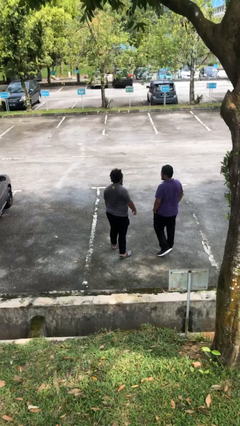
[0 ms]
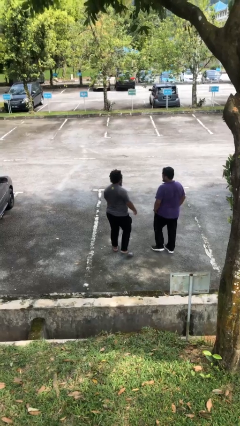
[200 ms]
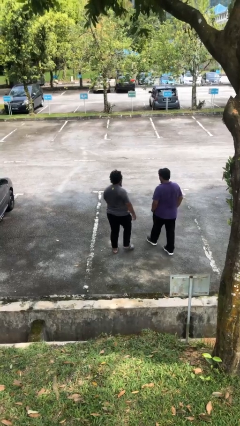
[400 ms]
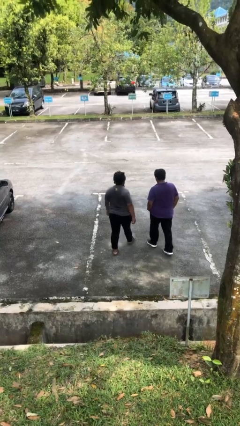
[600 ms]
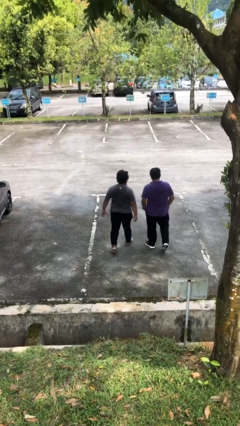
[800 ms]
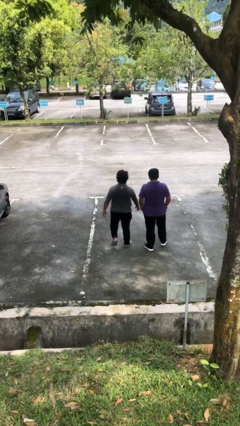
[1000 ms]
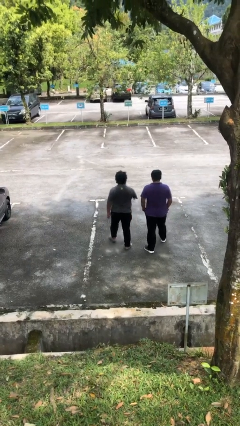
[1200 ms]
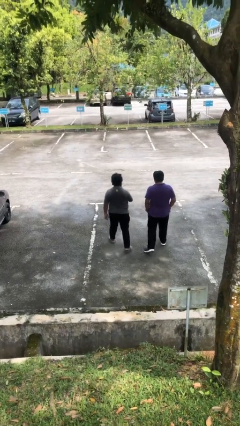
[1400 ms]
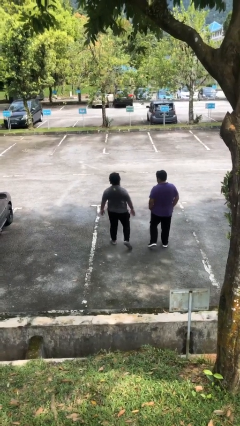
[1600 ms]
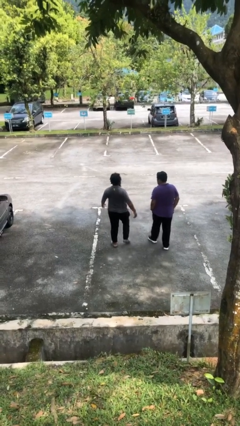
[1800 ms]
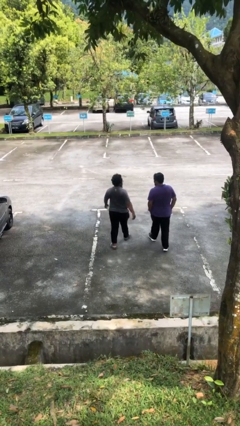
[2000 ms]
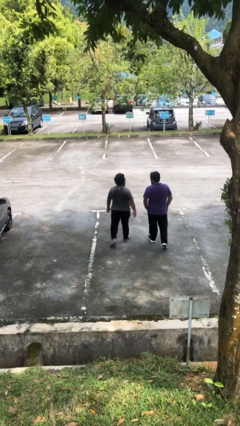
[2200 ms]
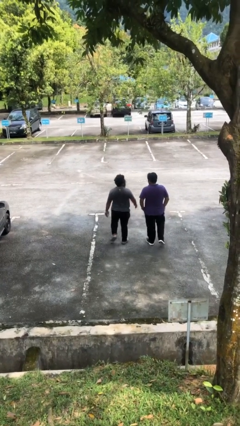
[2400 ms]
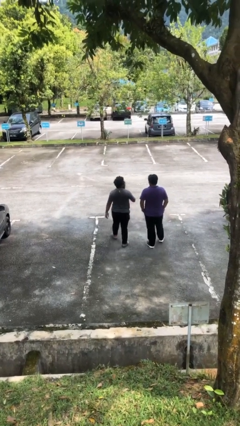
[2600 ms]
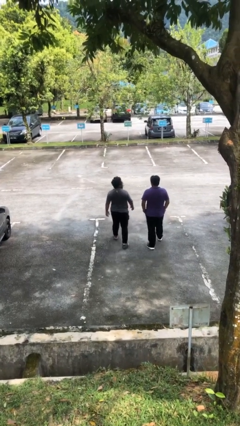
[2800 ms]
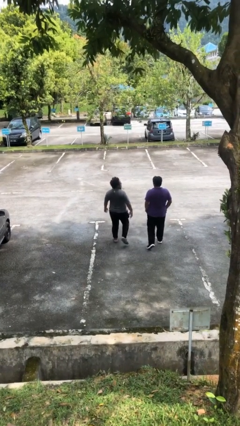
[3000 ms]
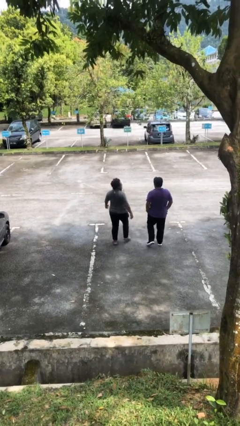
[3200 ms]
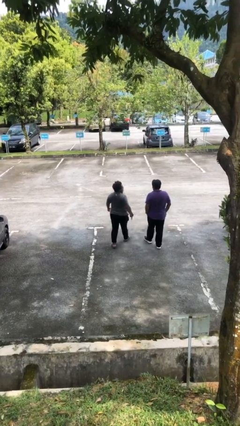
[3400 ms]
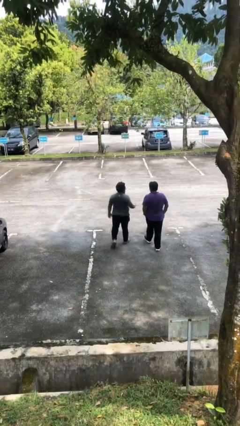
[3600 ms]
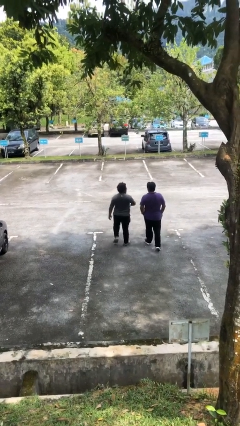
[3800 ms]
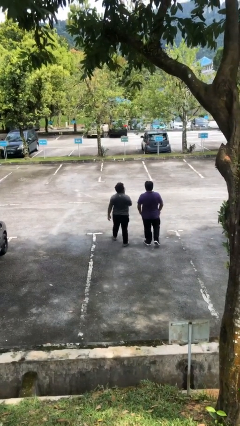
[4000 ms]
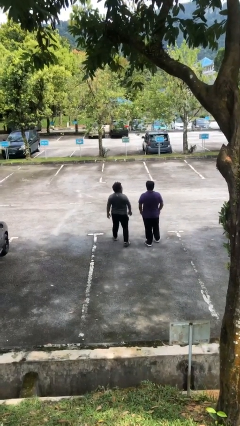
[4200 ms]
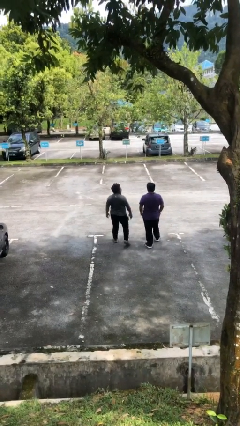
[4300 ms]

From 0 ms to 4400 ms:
person talks to person

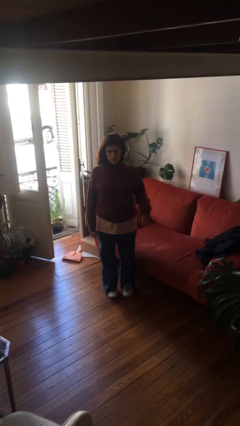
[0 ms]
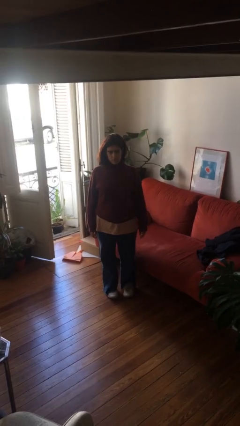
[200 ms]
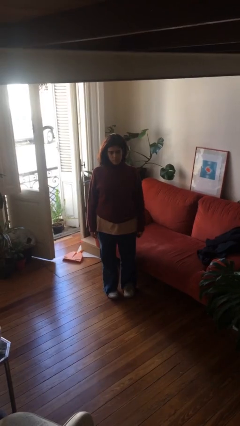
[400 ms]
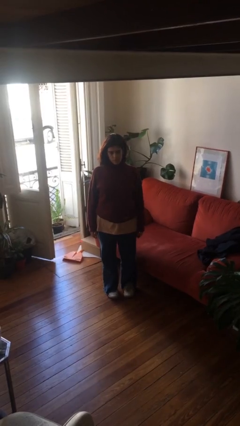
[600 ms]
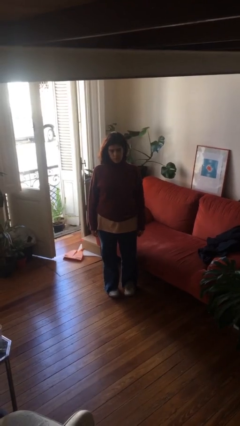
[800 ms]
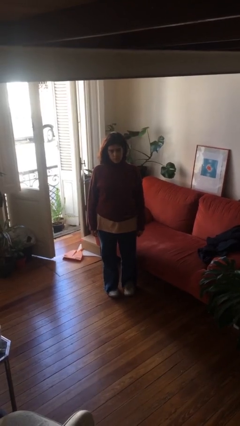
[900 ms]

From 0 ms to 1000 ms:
person gestures lower hand

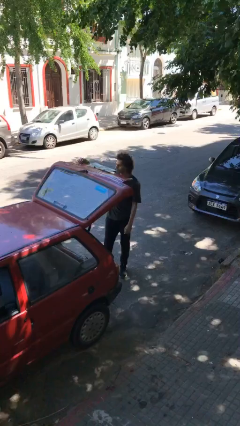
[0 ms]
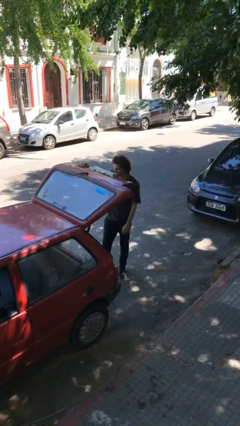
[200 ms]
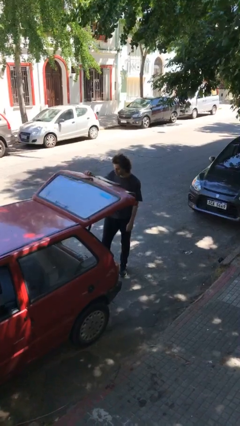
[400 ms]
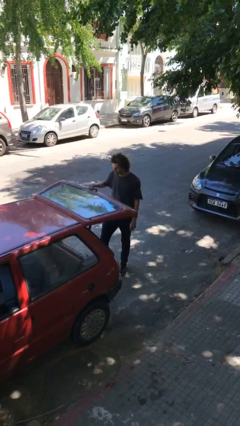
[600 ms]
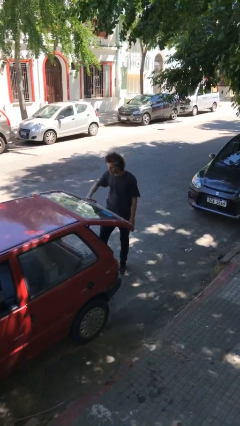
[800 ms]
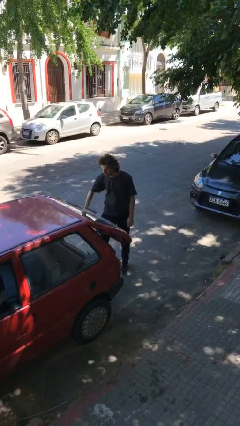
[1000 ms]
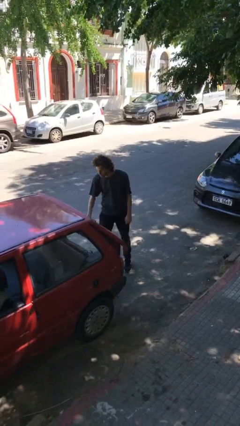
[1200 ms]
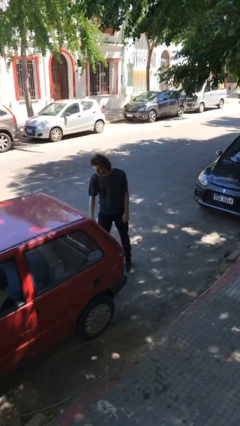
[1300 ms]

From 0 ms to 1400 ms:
person closes car trunk

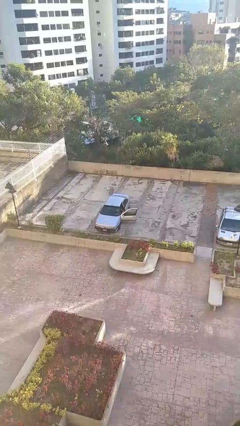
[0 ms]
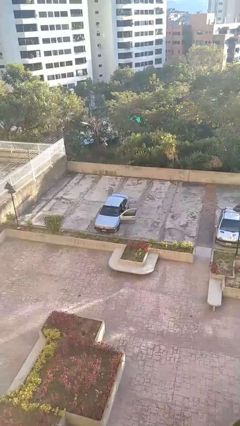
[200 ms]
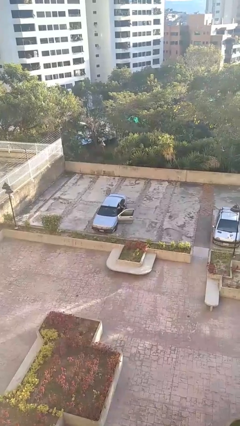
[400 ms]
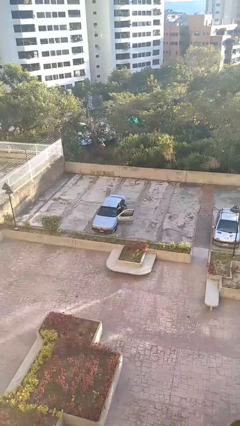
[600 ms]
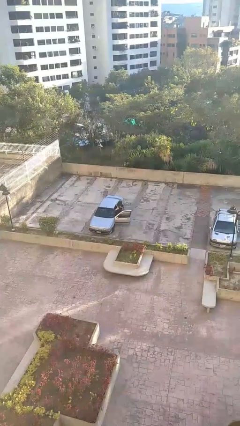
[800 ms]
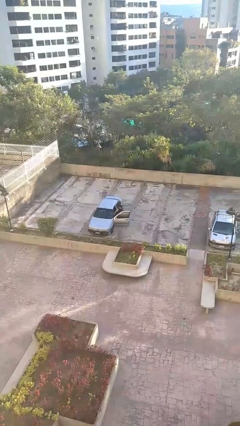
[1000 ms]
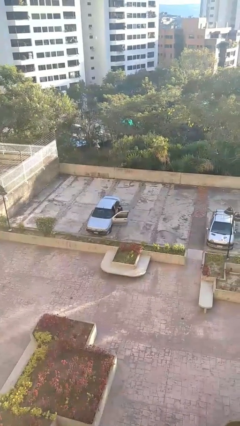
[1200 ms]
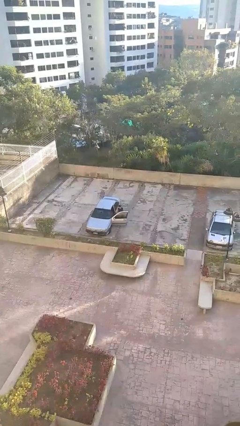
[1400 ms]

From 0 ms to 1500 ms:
person exits car

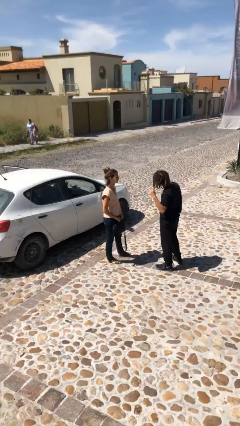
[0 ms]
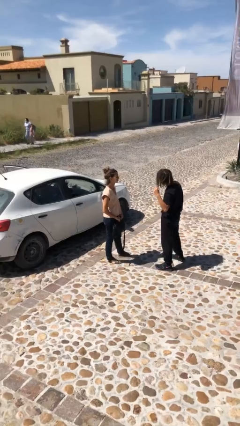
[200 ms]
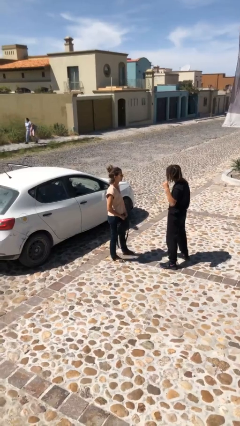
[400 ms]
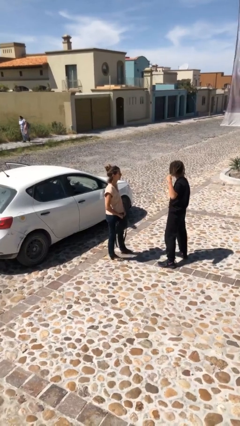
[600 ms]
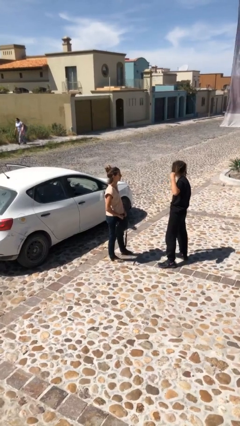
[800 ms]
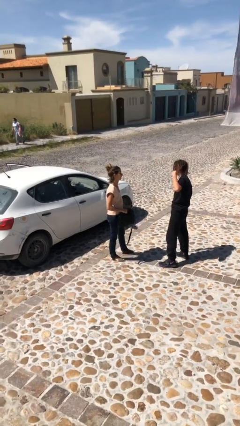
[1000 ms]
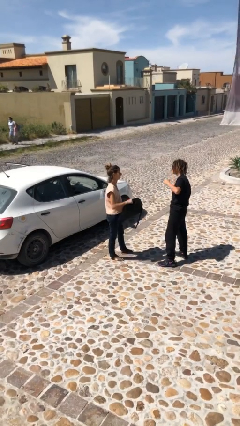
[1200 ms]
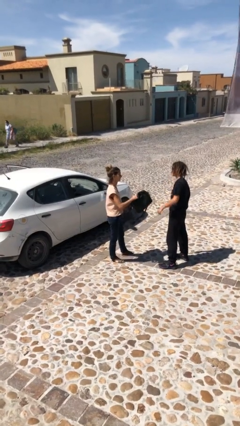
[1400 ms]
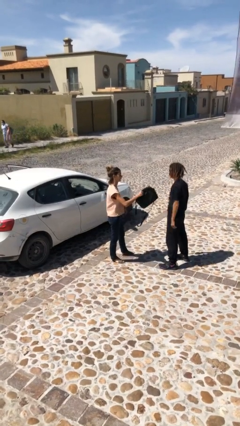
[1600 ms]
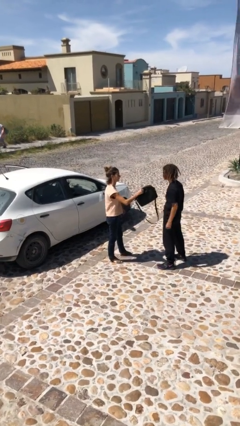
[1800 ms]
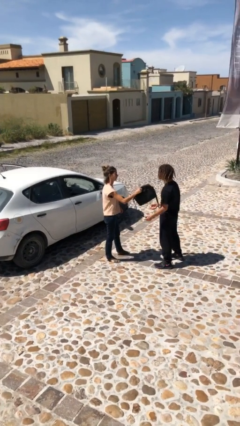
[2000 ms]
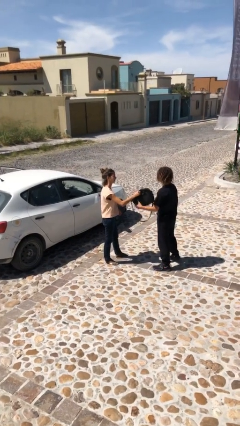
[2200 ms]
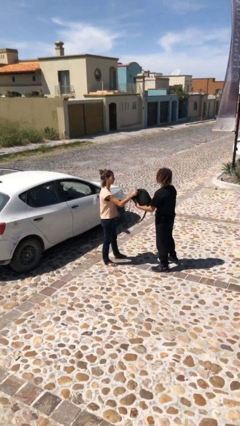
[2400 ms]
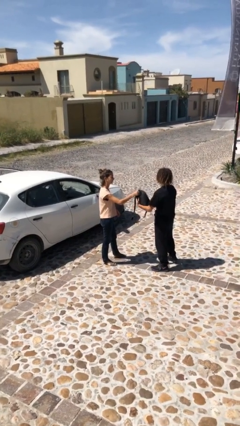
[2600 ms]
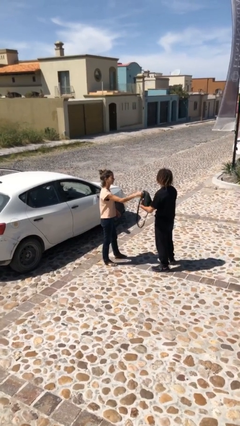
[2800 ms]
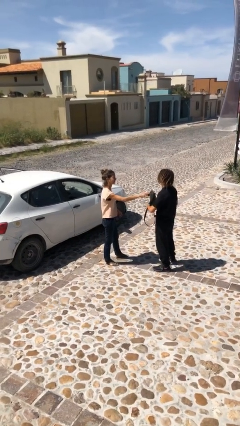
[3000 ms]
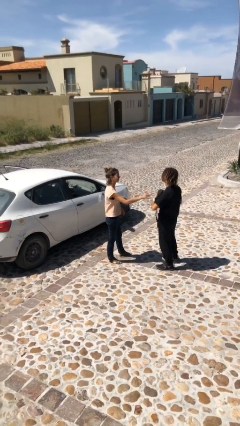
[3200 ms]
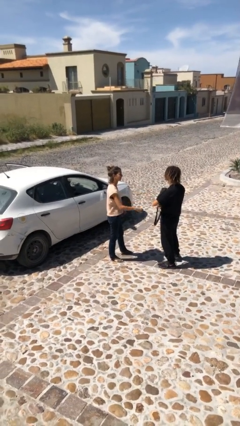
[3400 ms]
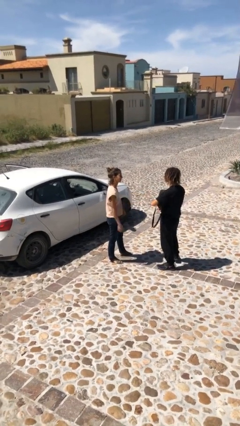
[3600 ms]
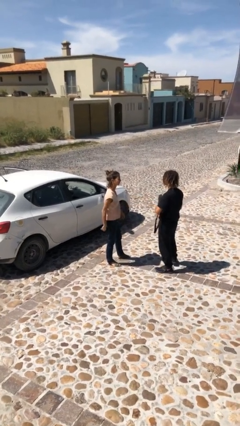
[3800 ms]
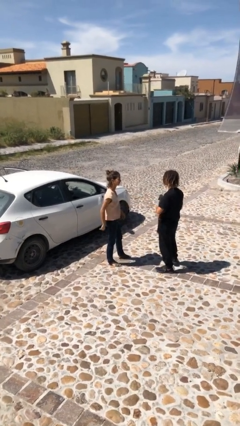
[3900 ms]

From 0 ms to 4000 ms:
person transfers object to person

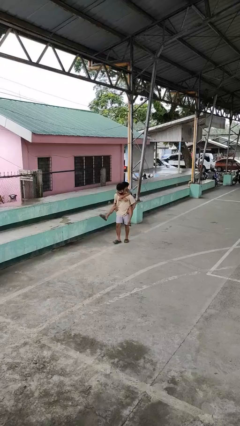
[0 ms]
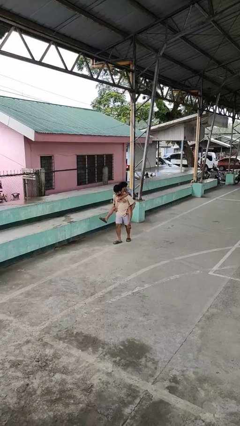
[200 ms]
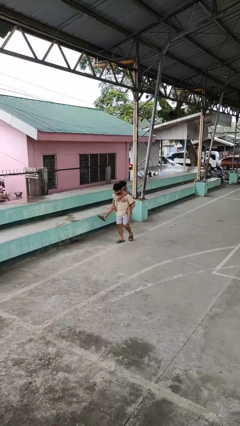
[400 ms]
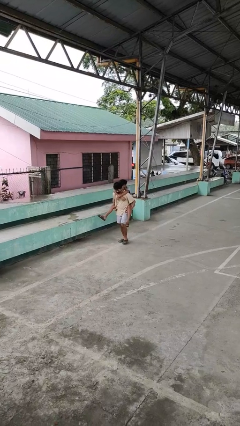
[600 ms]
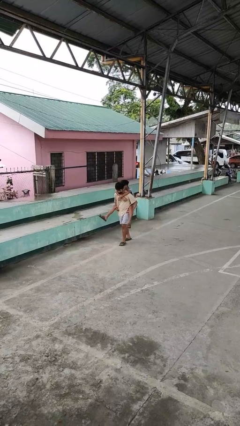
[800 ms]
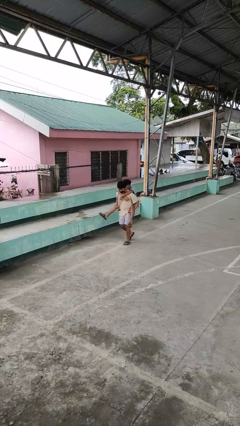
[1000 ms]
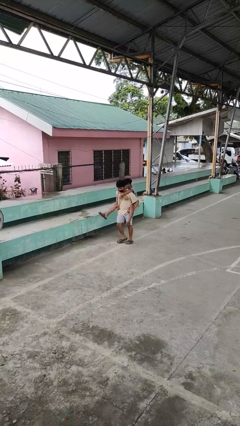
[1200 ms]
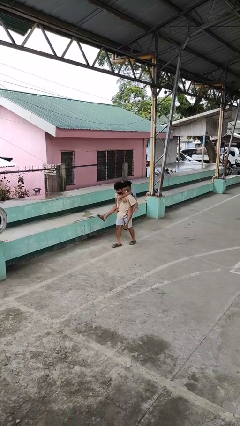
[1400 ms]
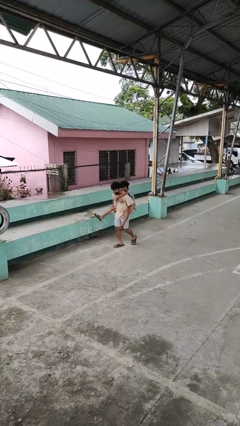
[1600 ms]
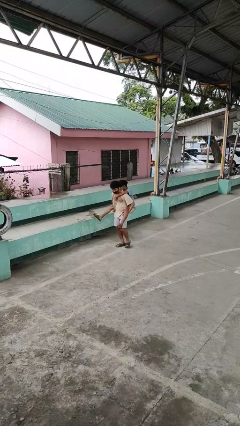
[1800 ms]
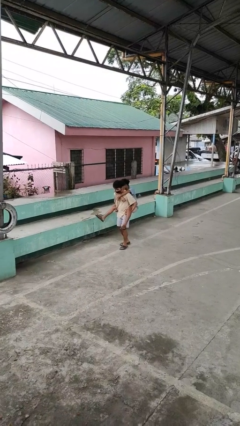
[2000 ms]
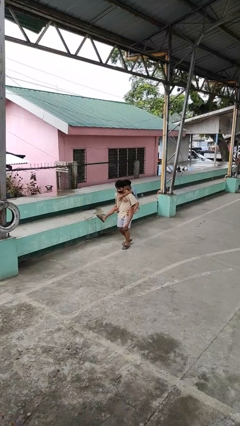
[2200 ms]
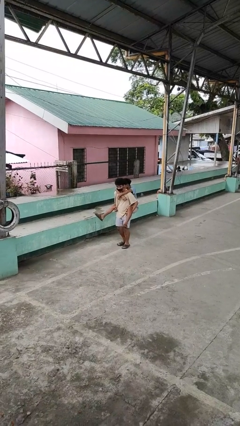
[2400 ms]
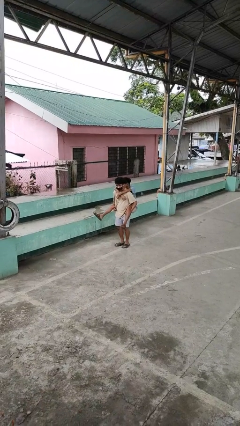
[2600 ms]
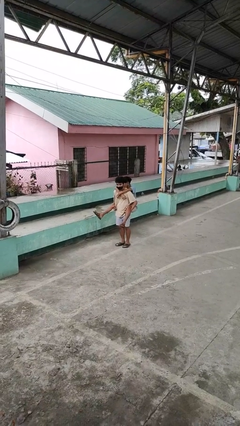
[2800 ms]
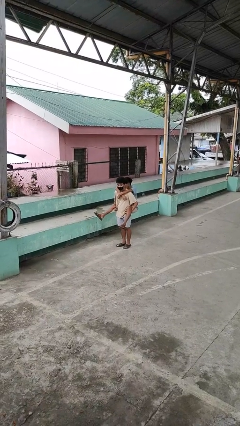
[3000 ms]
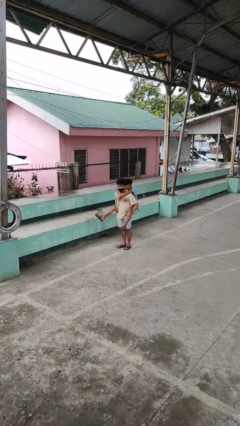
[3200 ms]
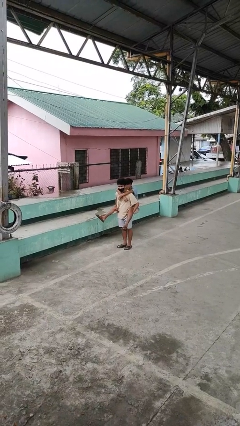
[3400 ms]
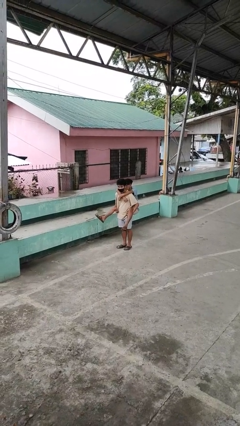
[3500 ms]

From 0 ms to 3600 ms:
person carries person on back

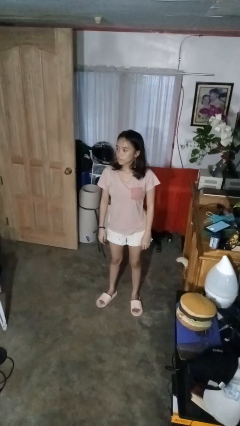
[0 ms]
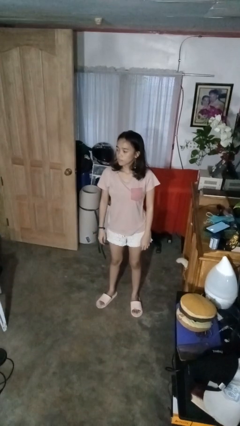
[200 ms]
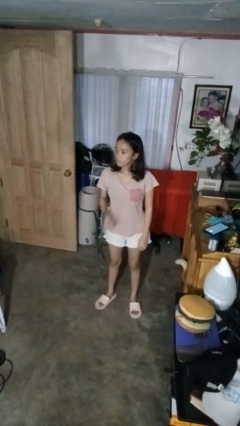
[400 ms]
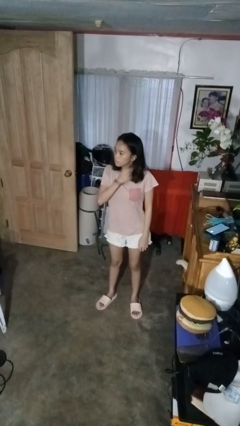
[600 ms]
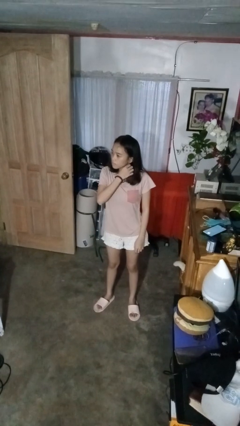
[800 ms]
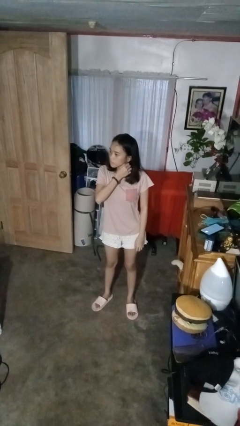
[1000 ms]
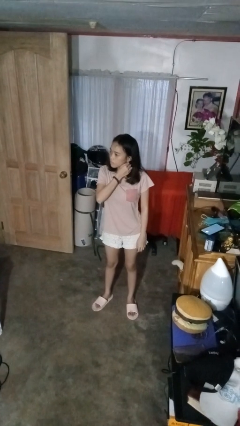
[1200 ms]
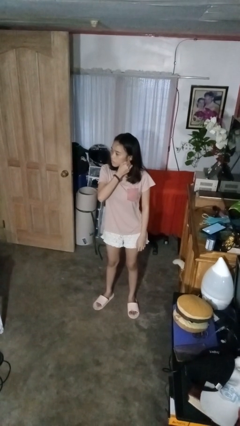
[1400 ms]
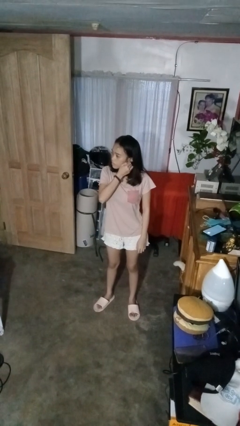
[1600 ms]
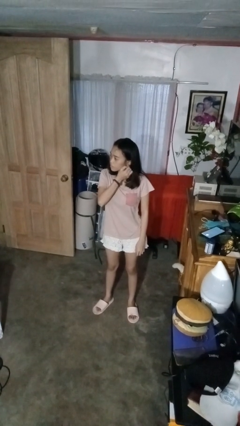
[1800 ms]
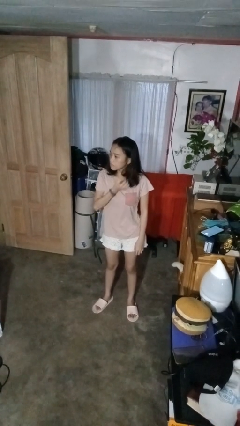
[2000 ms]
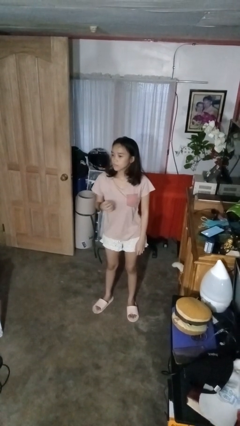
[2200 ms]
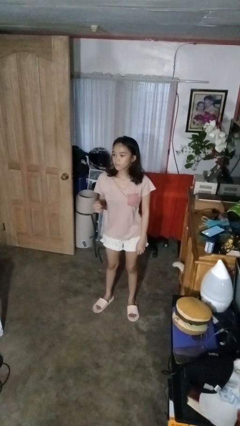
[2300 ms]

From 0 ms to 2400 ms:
person takes off earrings
